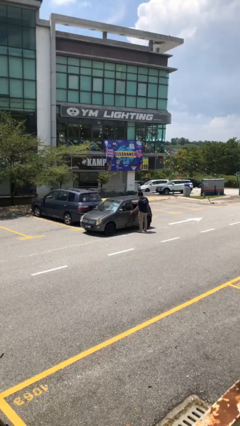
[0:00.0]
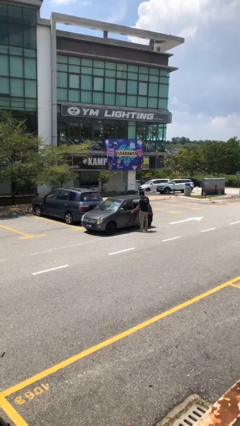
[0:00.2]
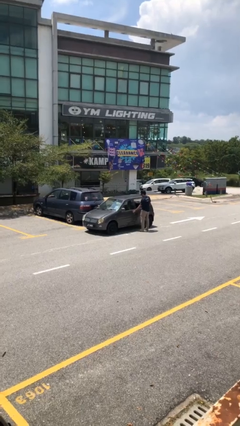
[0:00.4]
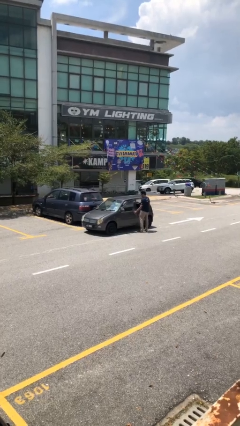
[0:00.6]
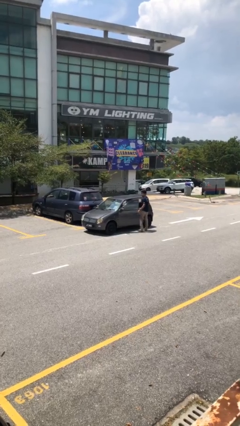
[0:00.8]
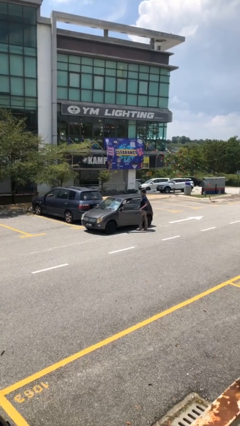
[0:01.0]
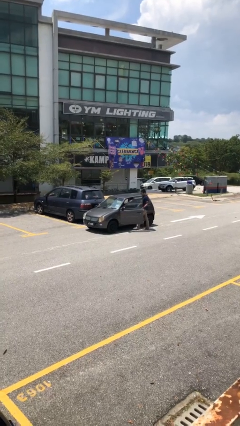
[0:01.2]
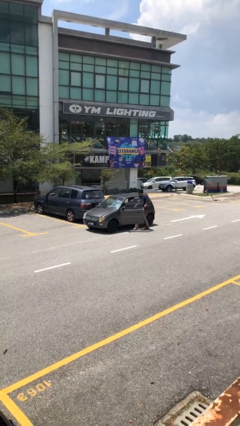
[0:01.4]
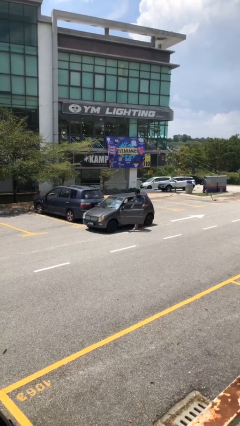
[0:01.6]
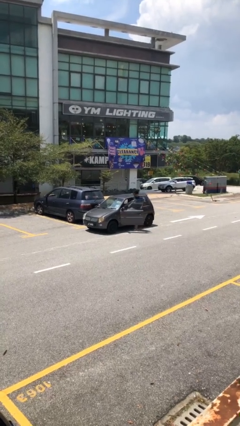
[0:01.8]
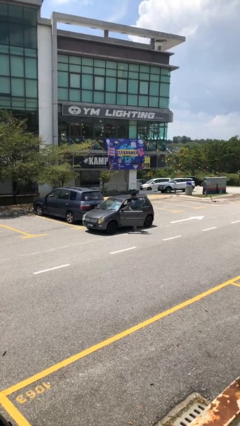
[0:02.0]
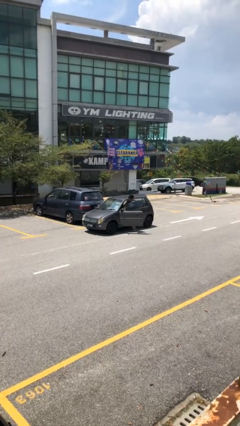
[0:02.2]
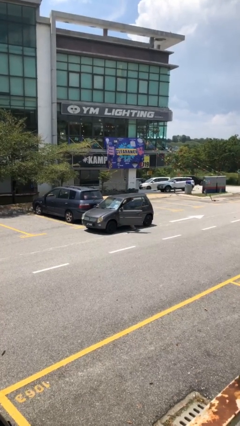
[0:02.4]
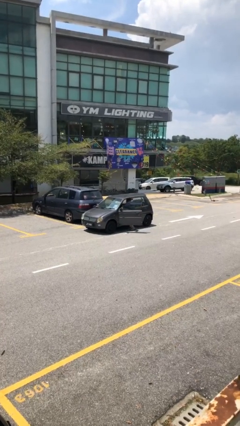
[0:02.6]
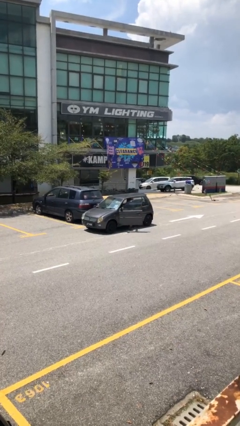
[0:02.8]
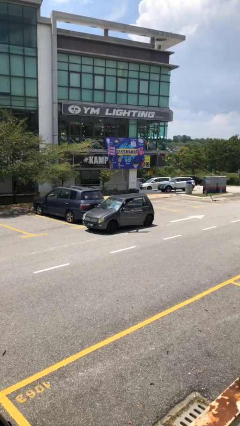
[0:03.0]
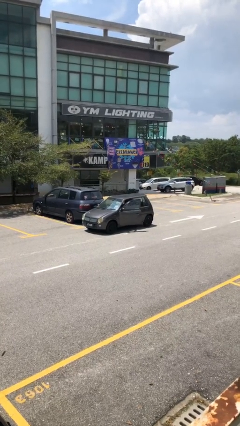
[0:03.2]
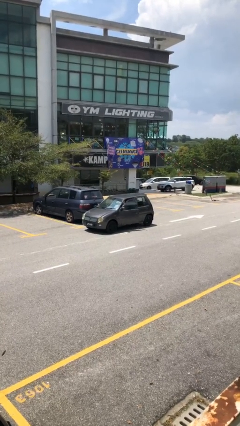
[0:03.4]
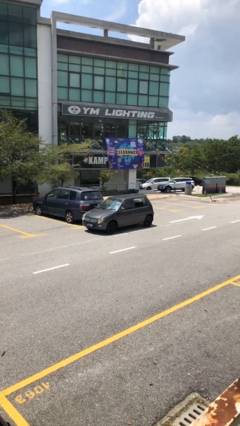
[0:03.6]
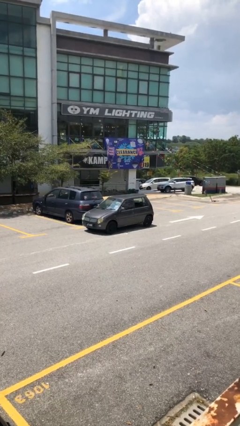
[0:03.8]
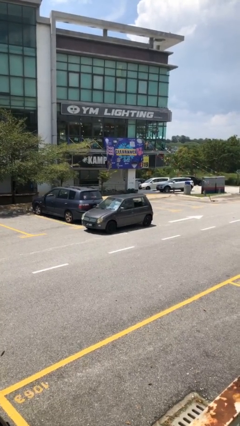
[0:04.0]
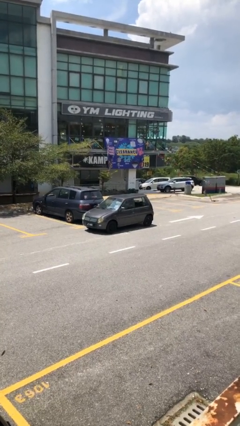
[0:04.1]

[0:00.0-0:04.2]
car picks up person

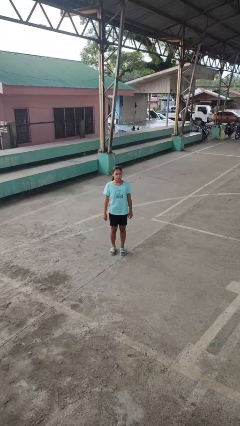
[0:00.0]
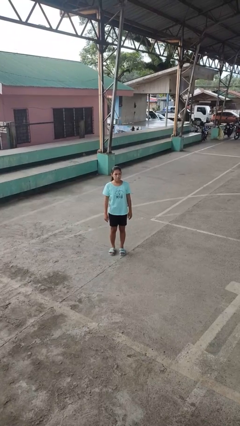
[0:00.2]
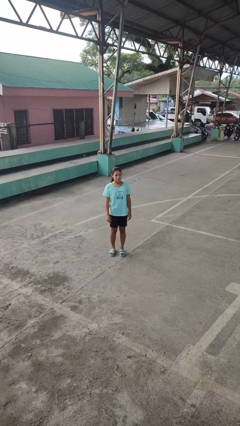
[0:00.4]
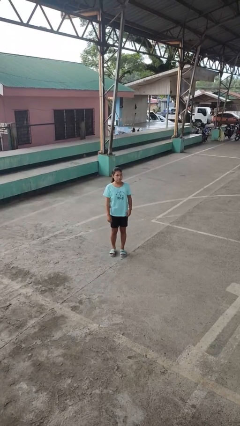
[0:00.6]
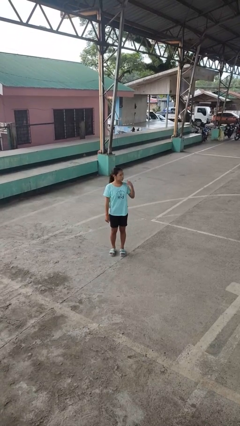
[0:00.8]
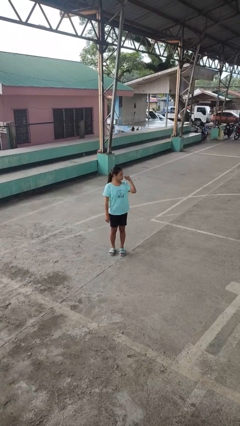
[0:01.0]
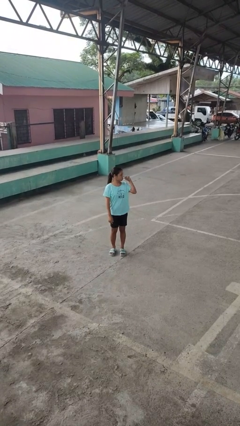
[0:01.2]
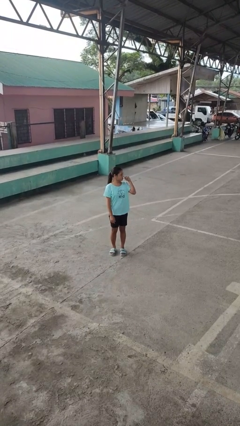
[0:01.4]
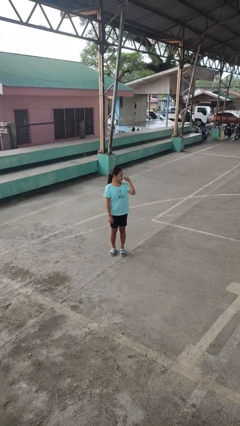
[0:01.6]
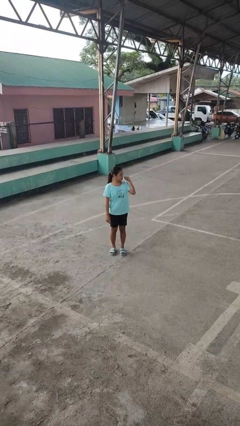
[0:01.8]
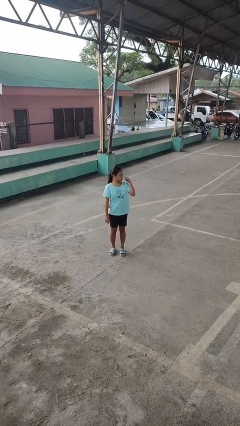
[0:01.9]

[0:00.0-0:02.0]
person gestures behind me

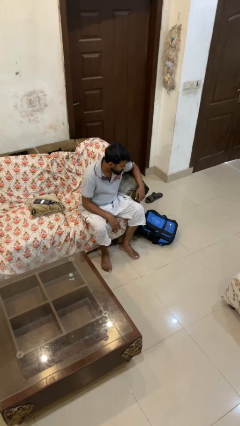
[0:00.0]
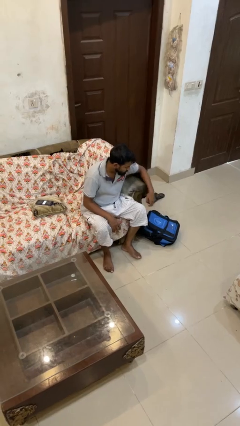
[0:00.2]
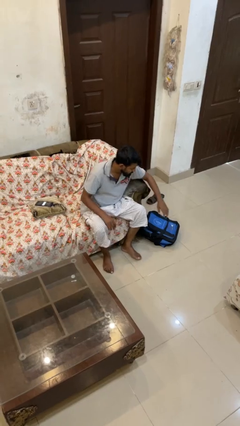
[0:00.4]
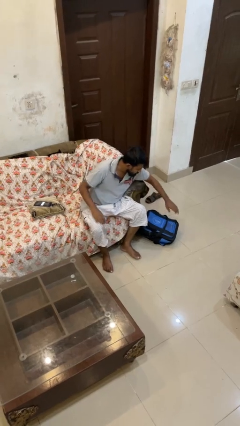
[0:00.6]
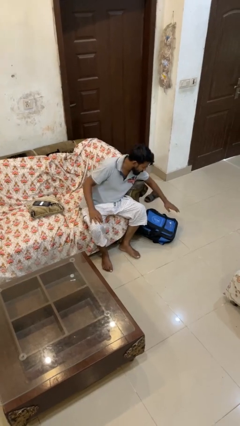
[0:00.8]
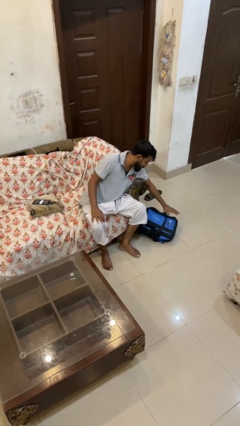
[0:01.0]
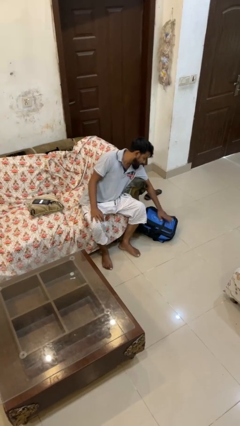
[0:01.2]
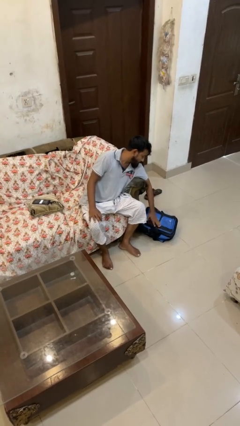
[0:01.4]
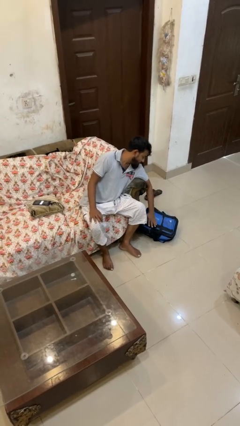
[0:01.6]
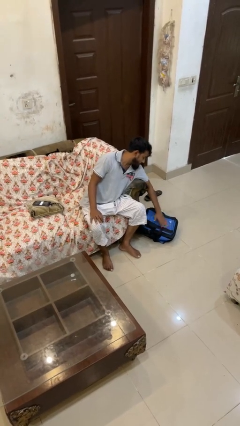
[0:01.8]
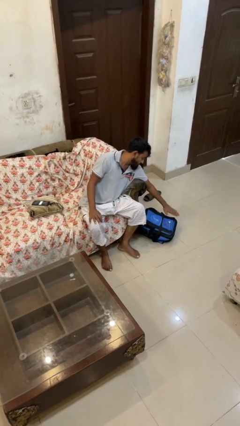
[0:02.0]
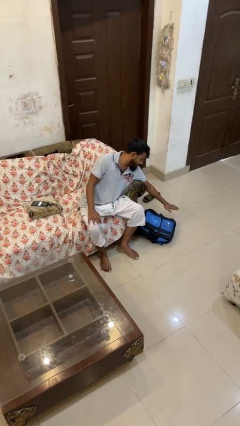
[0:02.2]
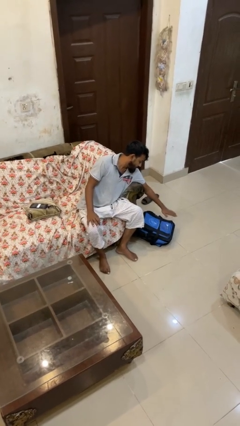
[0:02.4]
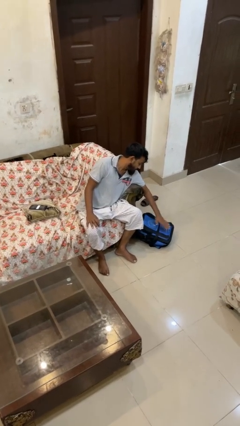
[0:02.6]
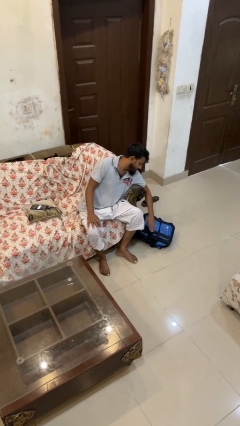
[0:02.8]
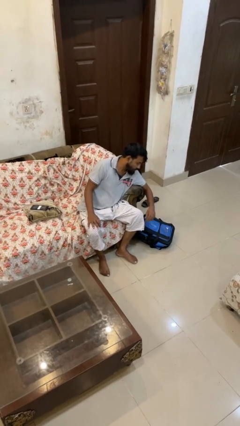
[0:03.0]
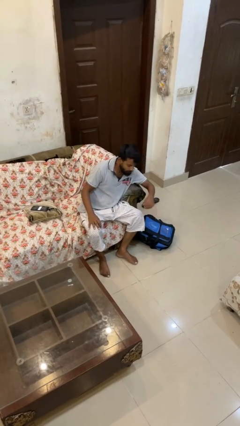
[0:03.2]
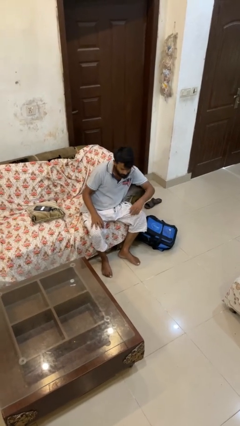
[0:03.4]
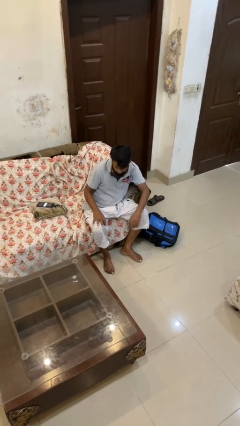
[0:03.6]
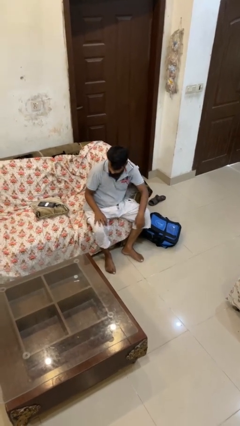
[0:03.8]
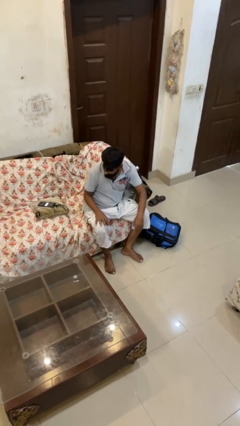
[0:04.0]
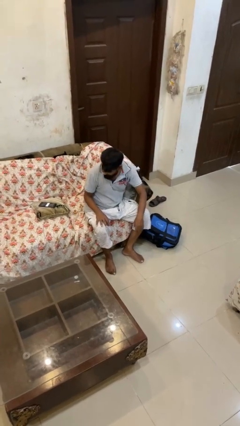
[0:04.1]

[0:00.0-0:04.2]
person waves hand over object

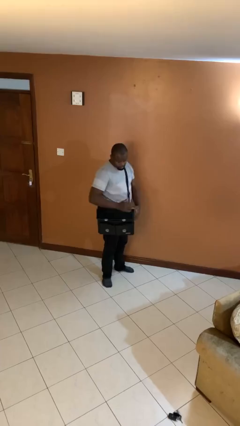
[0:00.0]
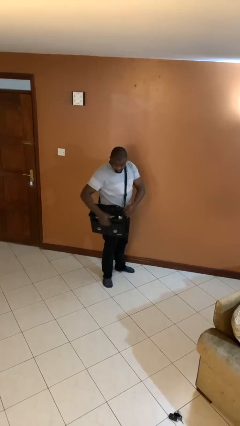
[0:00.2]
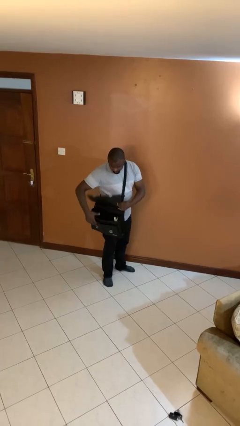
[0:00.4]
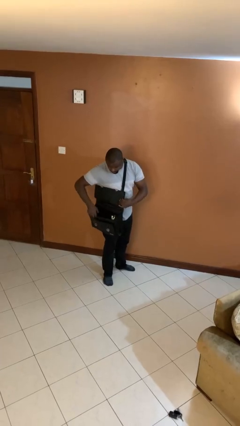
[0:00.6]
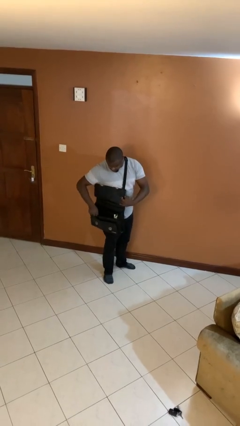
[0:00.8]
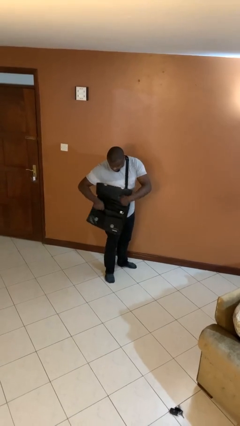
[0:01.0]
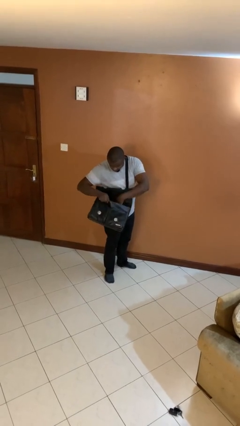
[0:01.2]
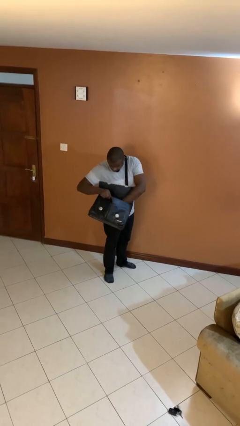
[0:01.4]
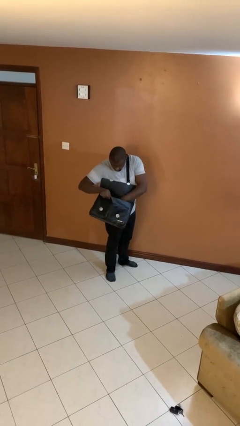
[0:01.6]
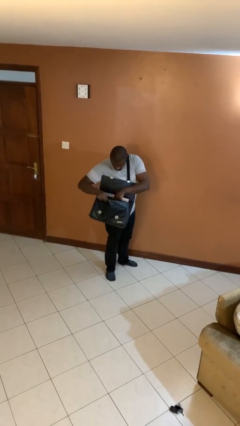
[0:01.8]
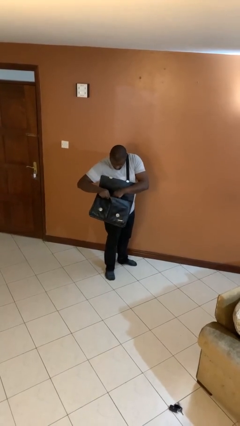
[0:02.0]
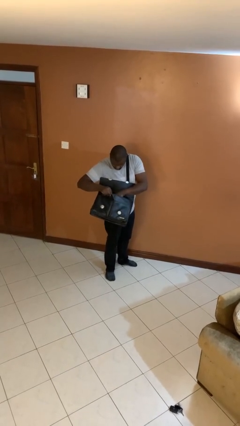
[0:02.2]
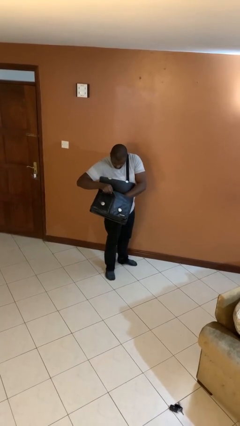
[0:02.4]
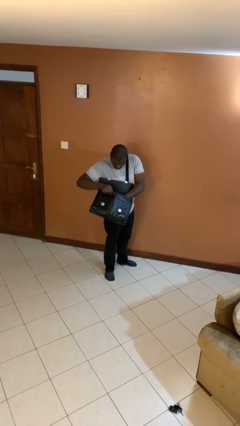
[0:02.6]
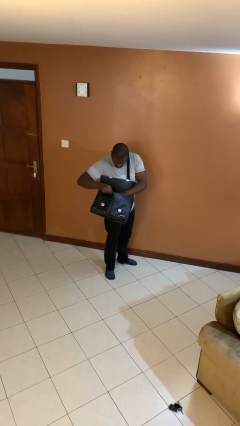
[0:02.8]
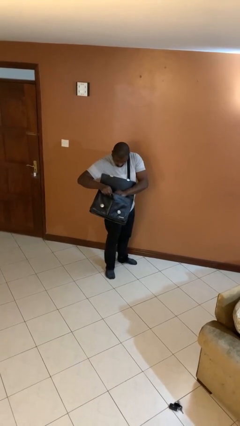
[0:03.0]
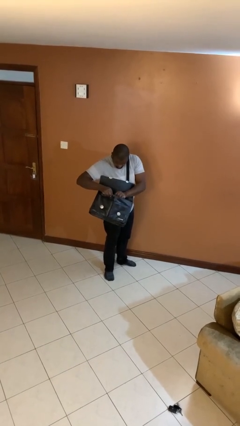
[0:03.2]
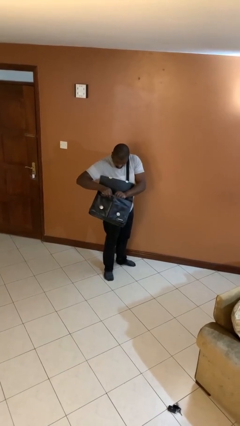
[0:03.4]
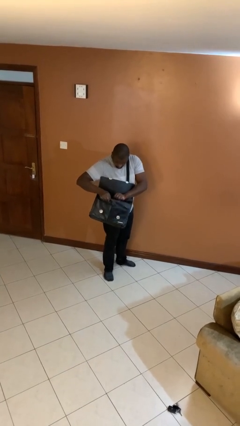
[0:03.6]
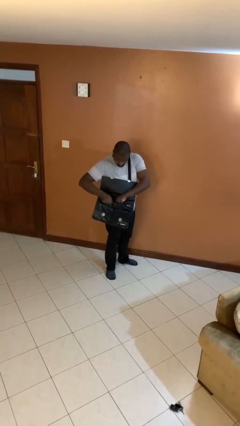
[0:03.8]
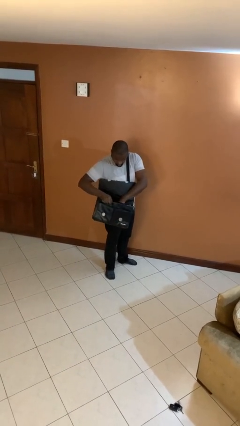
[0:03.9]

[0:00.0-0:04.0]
person searches in purse

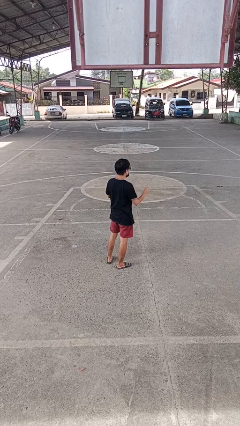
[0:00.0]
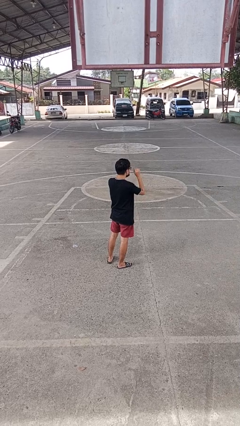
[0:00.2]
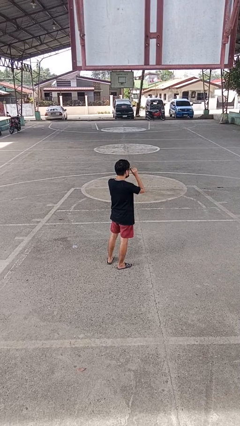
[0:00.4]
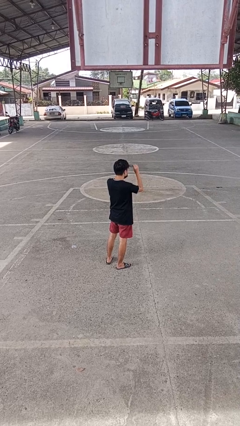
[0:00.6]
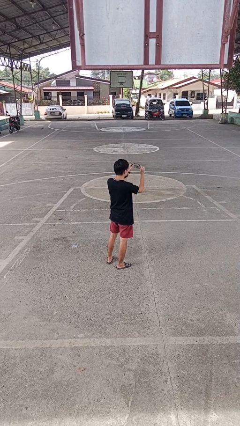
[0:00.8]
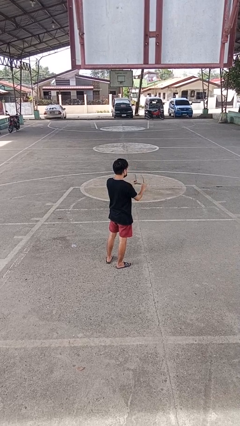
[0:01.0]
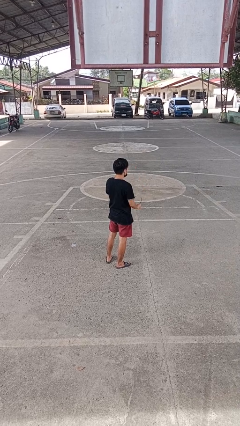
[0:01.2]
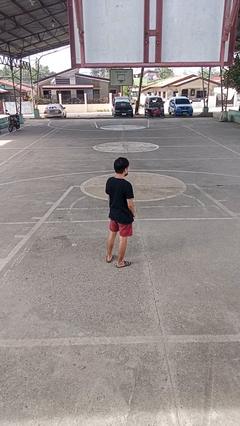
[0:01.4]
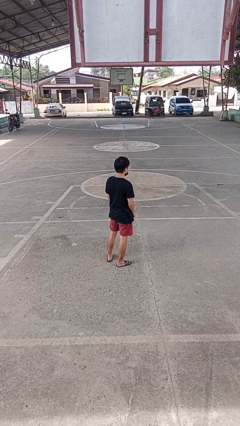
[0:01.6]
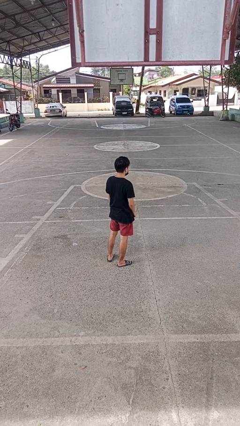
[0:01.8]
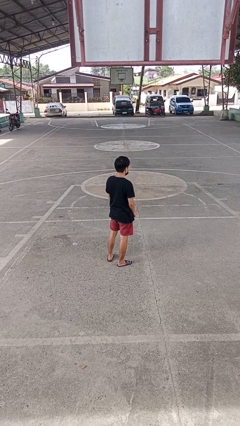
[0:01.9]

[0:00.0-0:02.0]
person takes off glasses

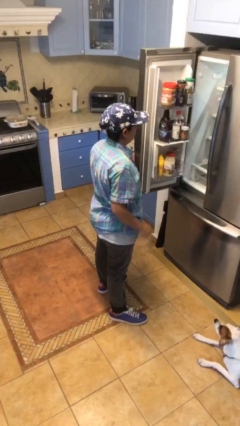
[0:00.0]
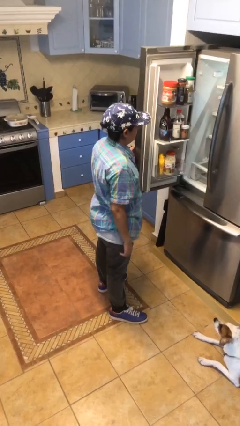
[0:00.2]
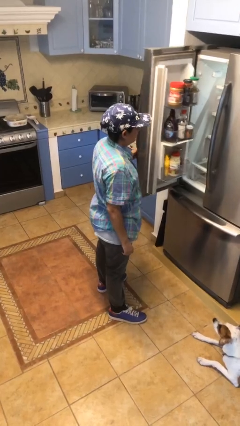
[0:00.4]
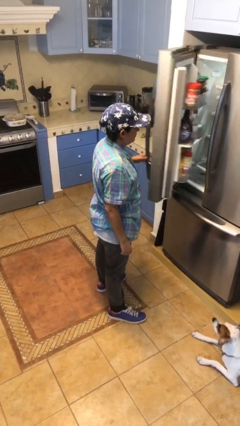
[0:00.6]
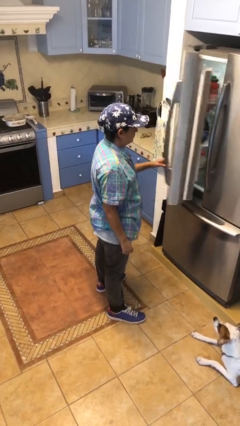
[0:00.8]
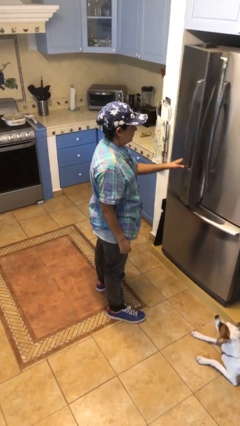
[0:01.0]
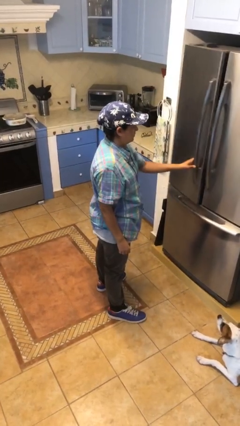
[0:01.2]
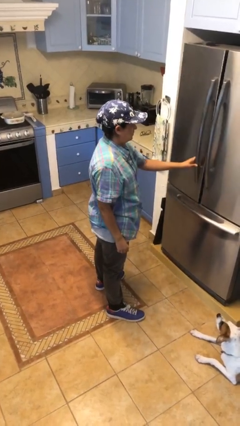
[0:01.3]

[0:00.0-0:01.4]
person closes refrigerator
